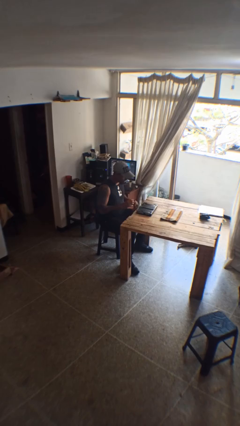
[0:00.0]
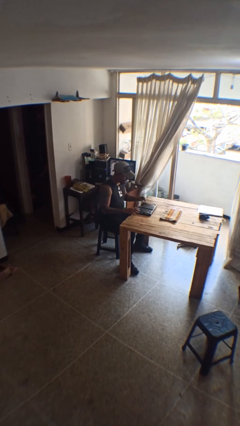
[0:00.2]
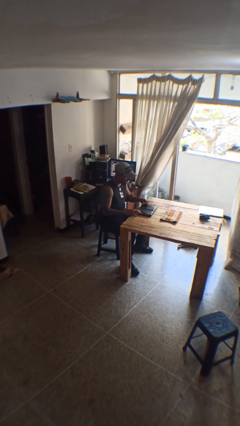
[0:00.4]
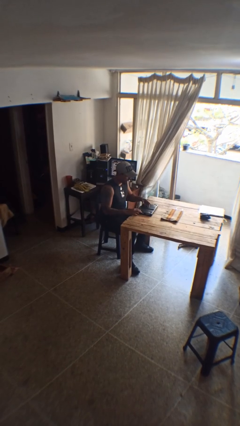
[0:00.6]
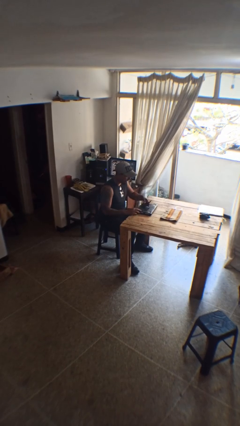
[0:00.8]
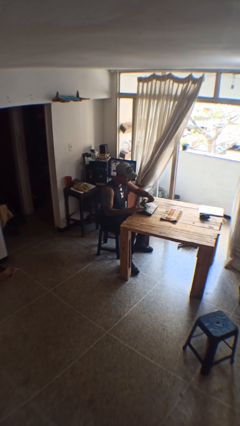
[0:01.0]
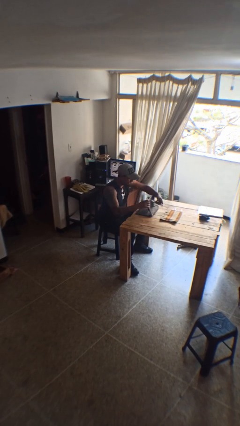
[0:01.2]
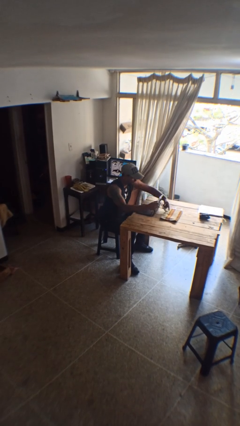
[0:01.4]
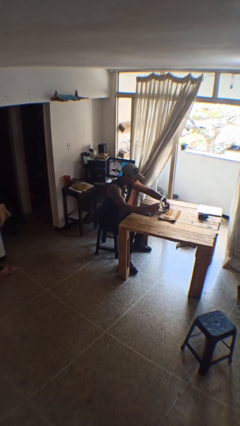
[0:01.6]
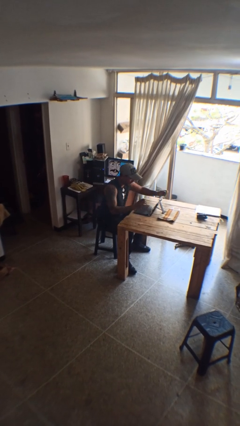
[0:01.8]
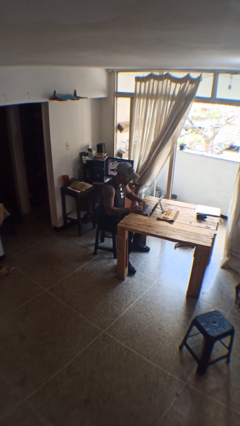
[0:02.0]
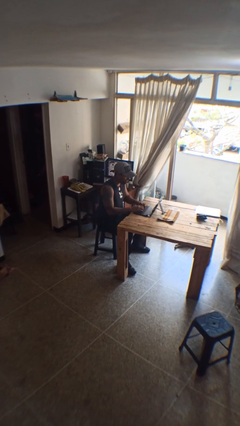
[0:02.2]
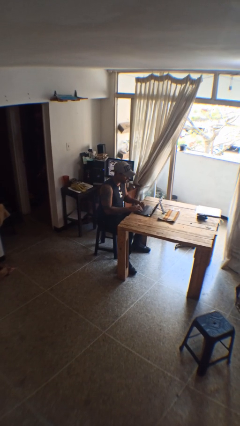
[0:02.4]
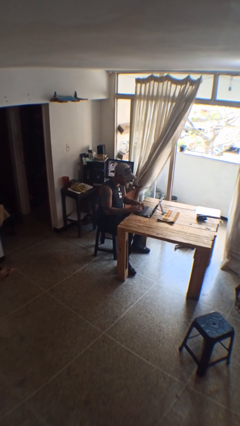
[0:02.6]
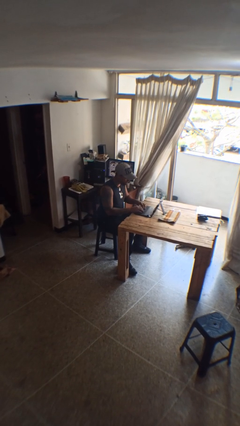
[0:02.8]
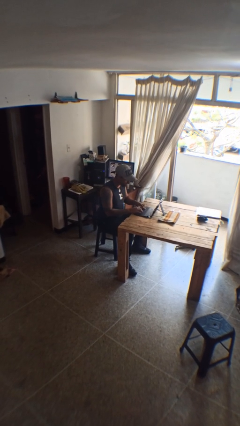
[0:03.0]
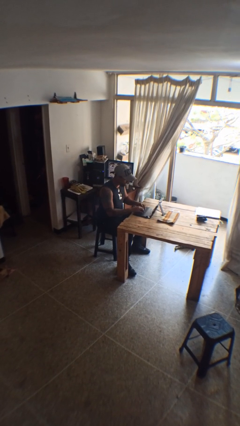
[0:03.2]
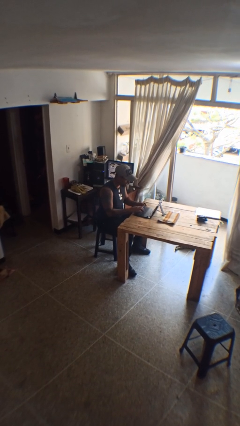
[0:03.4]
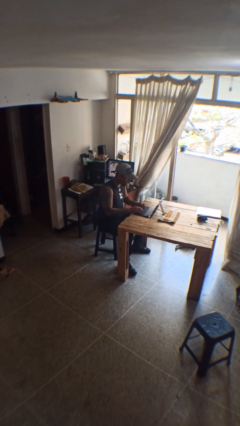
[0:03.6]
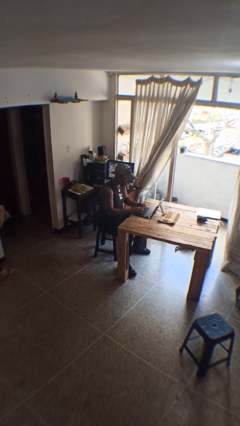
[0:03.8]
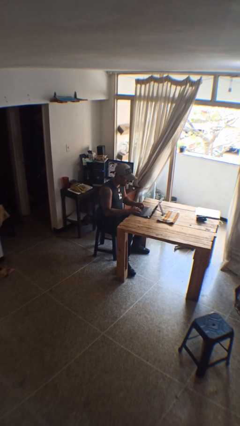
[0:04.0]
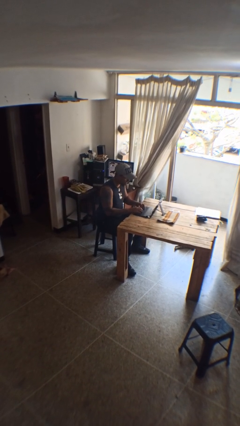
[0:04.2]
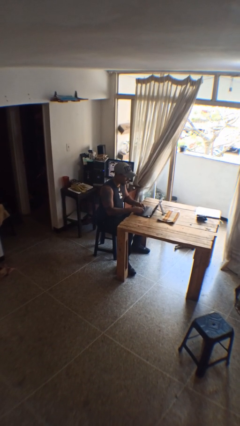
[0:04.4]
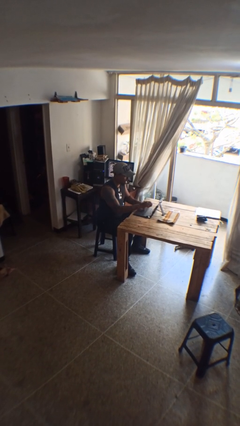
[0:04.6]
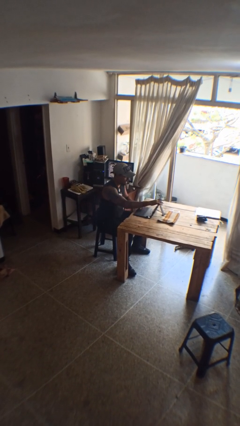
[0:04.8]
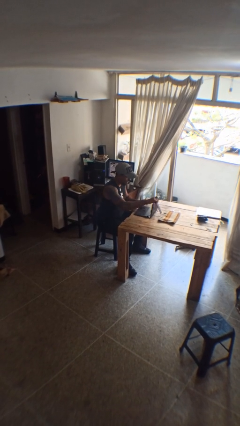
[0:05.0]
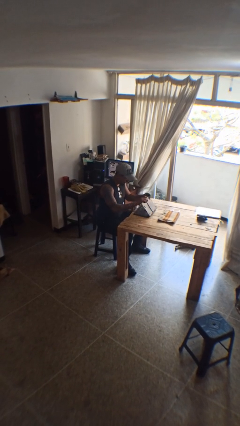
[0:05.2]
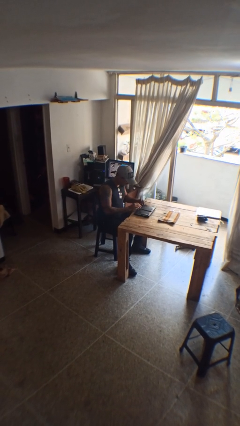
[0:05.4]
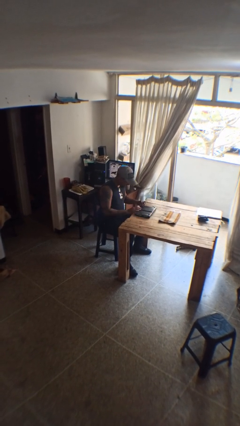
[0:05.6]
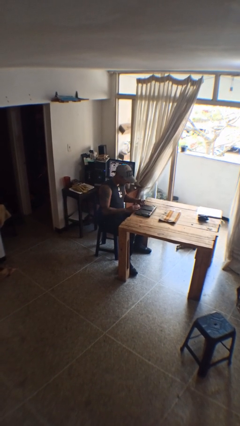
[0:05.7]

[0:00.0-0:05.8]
person interacts with laptop

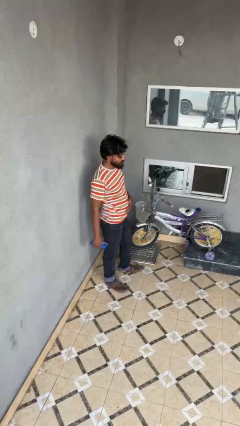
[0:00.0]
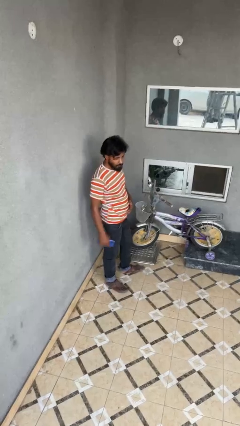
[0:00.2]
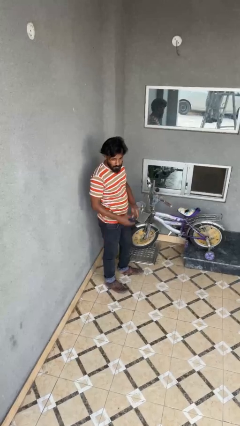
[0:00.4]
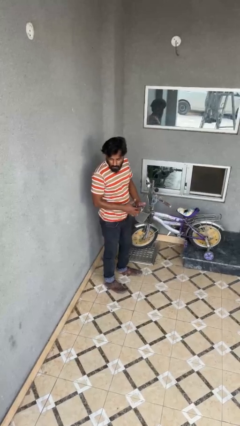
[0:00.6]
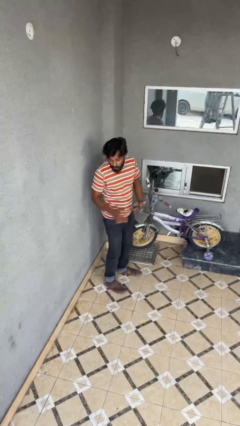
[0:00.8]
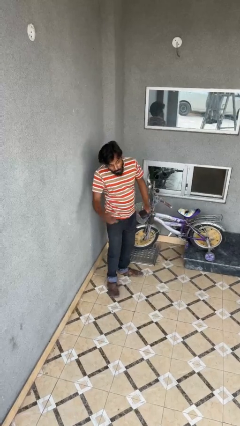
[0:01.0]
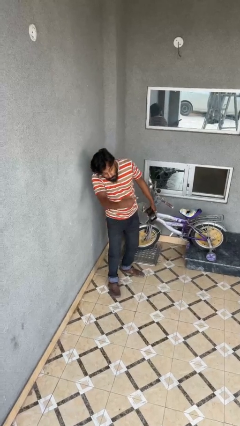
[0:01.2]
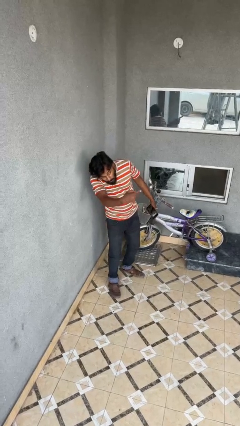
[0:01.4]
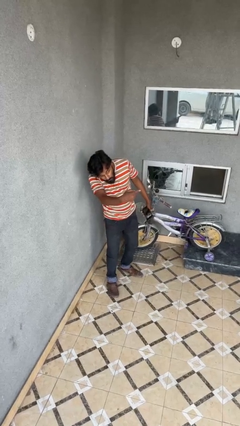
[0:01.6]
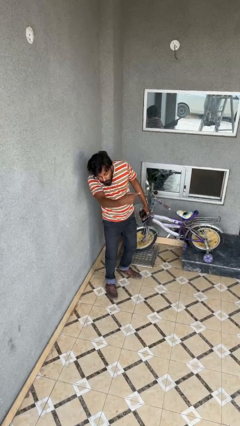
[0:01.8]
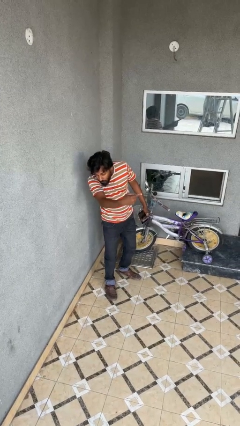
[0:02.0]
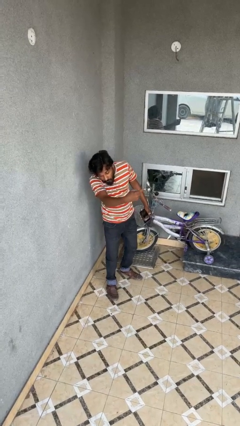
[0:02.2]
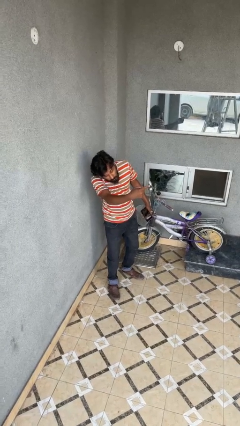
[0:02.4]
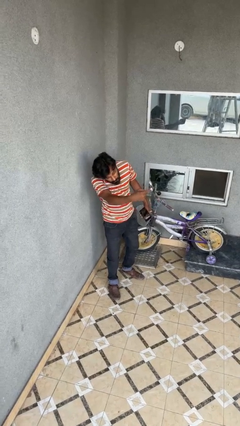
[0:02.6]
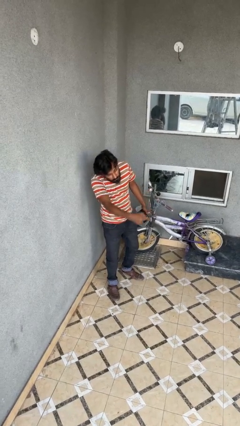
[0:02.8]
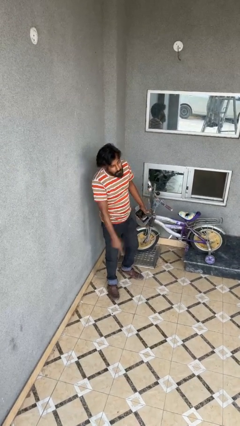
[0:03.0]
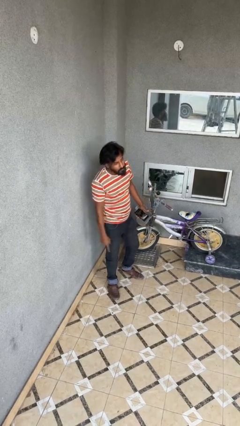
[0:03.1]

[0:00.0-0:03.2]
person points at person

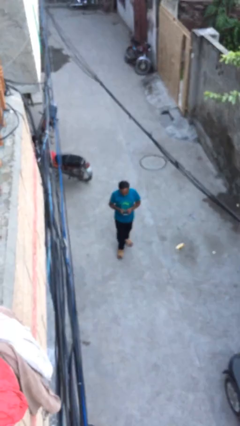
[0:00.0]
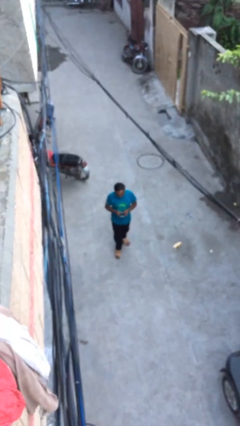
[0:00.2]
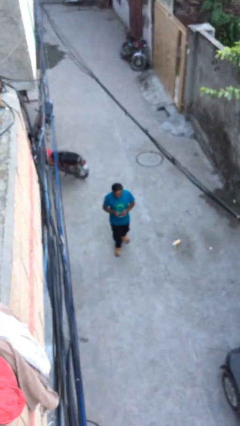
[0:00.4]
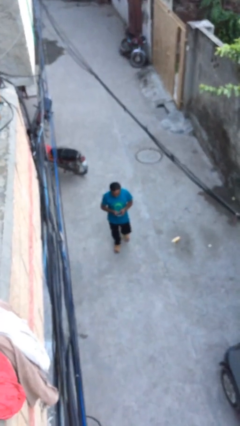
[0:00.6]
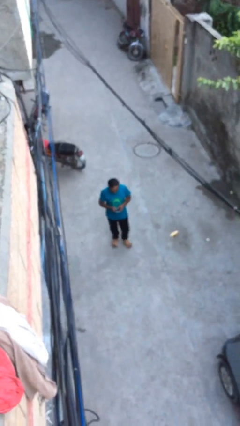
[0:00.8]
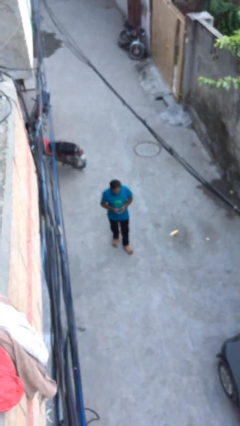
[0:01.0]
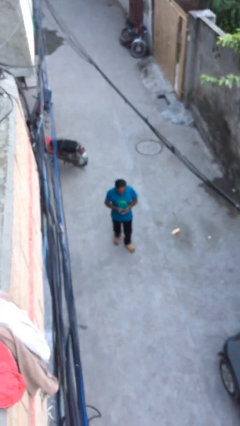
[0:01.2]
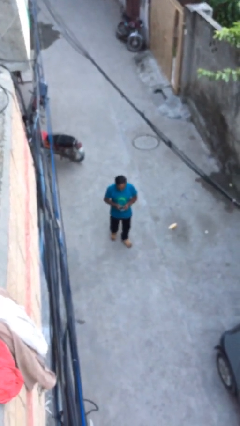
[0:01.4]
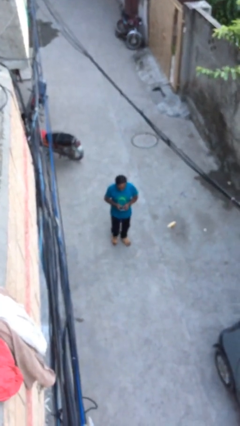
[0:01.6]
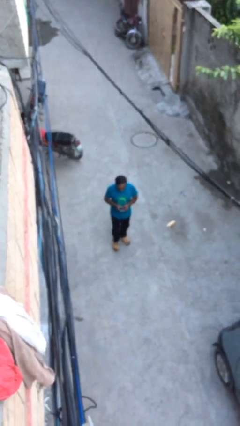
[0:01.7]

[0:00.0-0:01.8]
person texts on phone

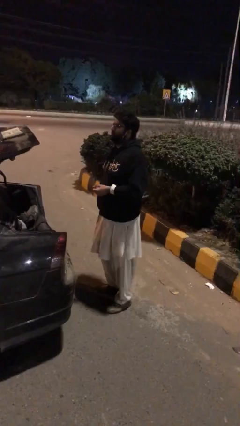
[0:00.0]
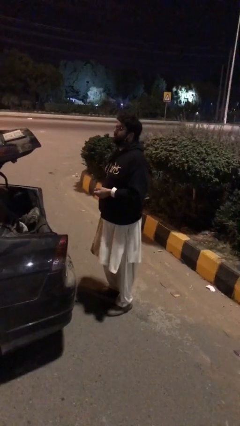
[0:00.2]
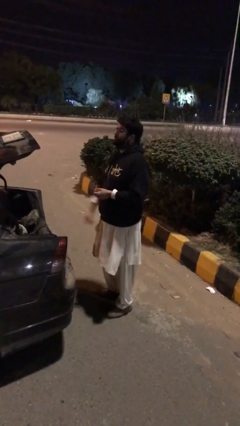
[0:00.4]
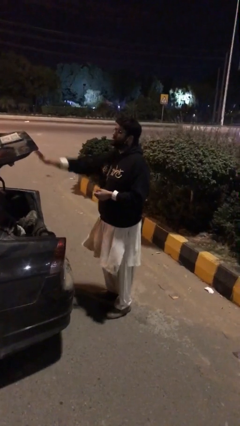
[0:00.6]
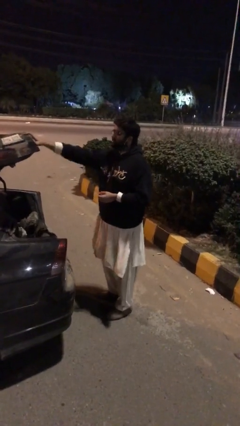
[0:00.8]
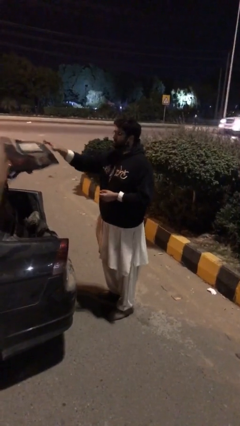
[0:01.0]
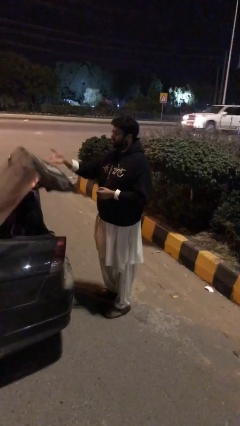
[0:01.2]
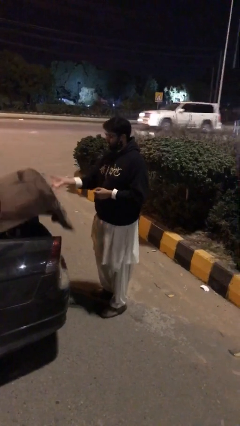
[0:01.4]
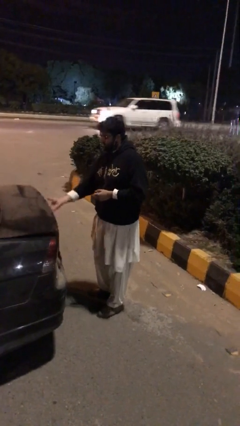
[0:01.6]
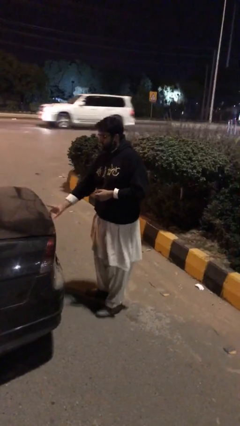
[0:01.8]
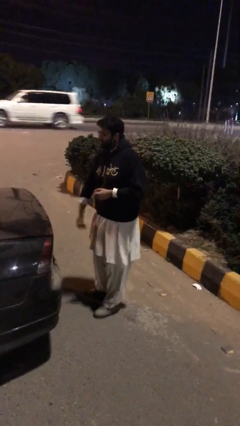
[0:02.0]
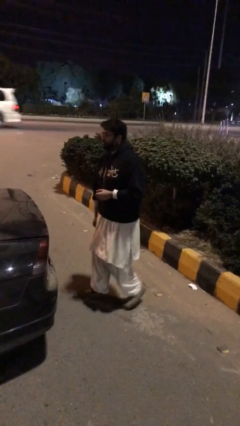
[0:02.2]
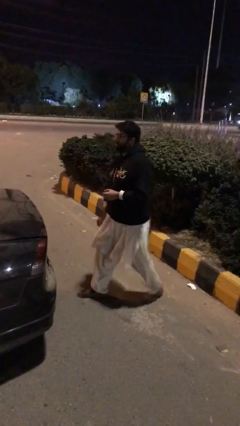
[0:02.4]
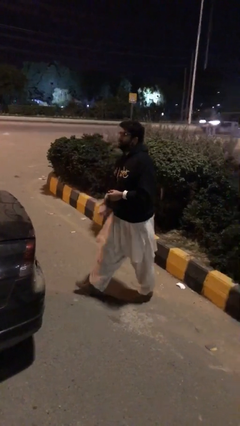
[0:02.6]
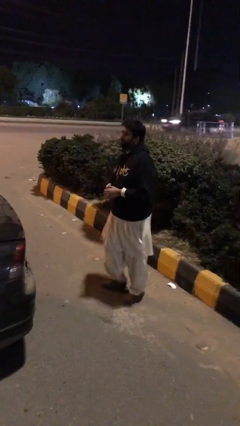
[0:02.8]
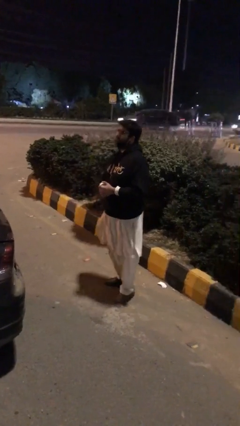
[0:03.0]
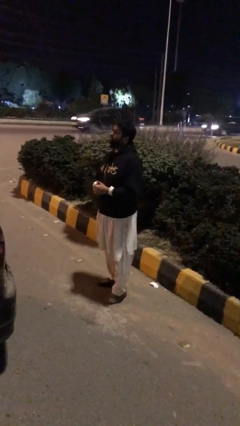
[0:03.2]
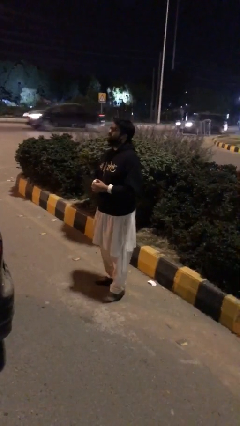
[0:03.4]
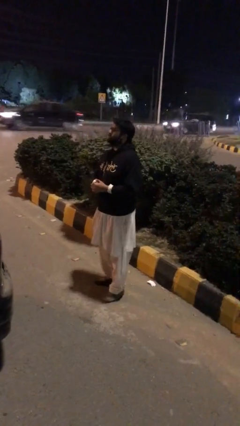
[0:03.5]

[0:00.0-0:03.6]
person closes car trunk

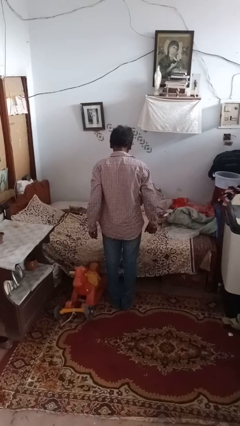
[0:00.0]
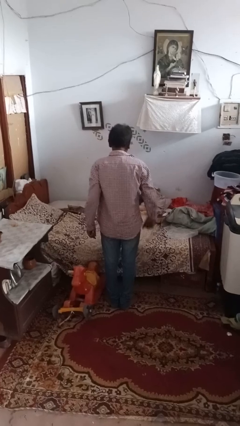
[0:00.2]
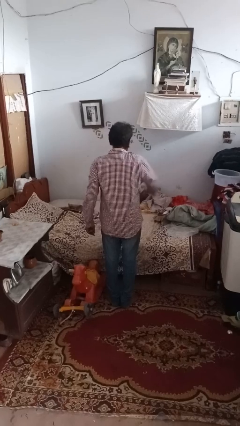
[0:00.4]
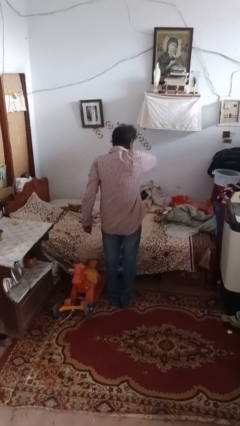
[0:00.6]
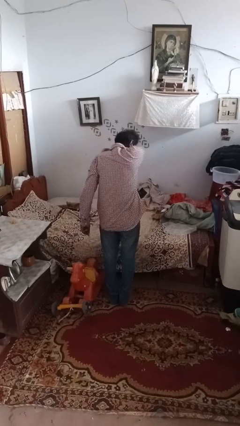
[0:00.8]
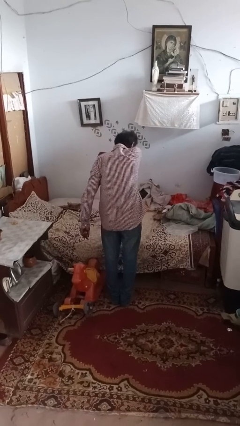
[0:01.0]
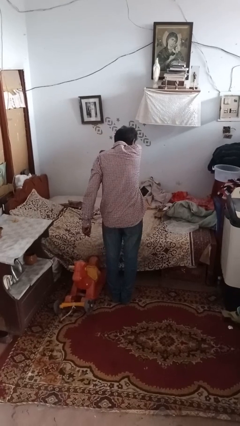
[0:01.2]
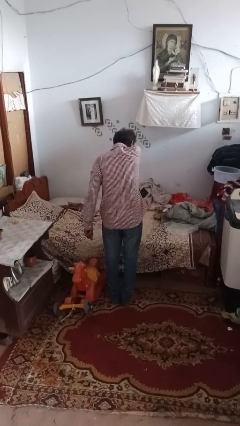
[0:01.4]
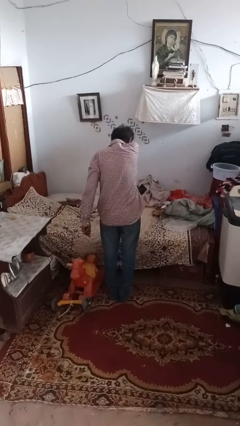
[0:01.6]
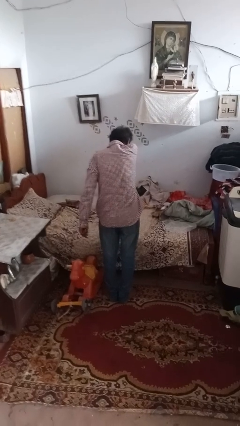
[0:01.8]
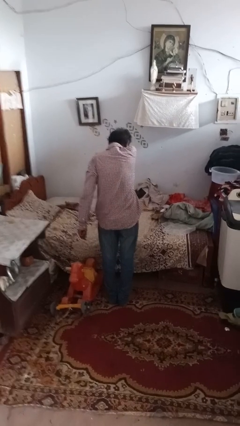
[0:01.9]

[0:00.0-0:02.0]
person sneezes into hand

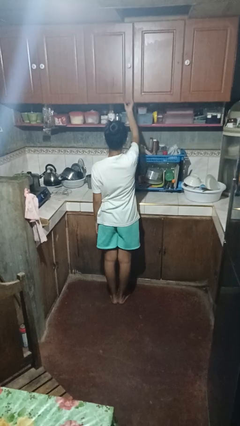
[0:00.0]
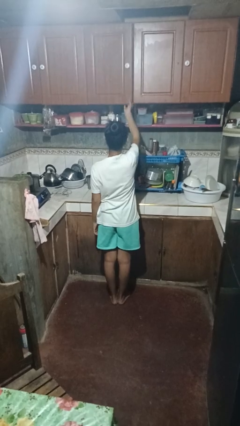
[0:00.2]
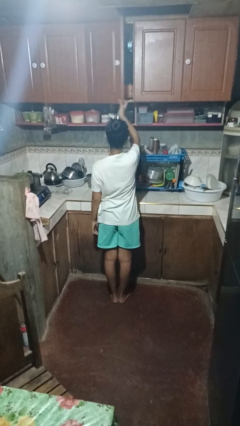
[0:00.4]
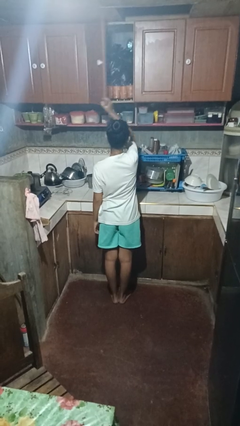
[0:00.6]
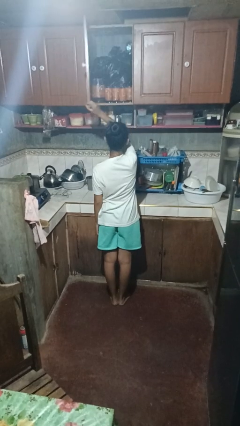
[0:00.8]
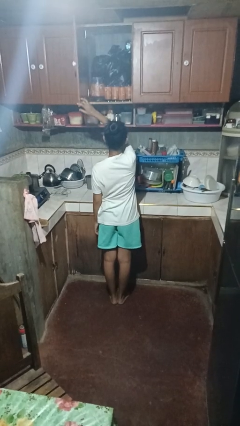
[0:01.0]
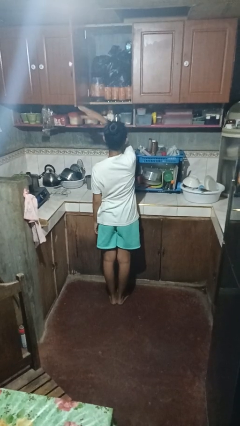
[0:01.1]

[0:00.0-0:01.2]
person opens cabinet
